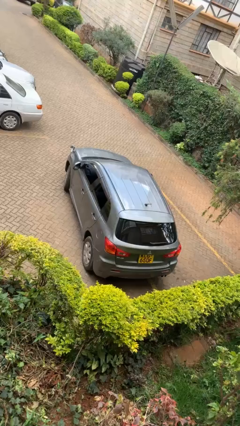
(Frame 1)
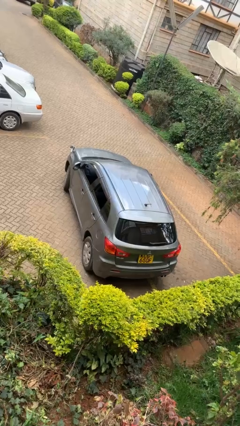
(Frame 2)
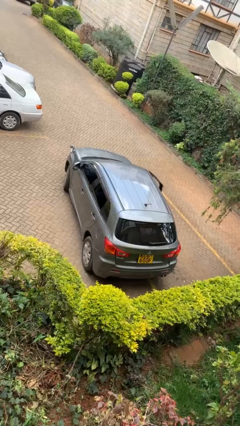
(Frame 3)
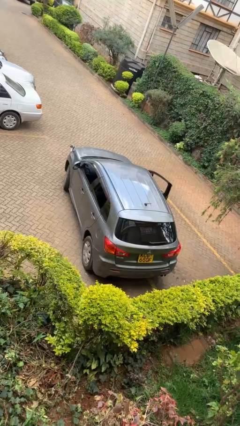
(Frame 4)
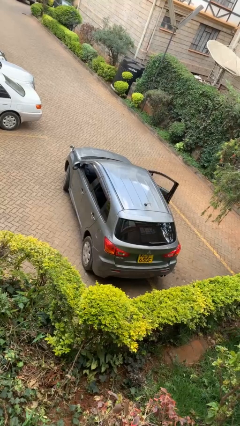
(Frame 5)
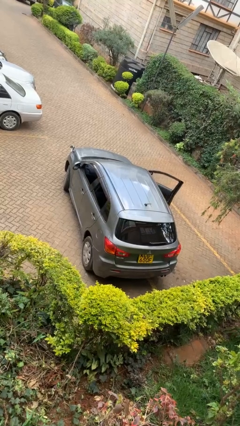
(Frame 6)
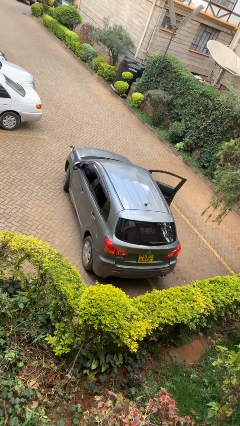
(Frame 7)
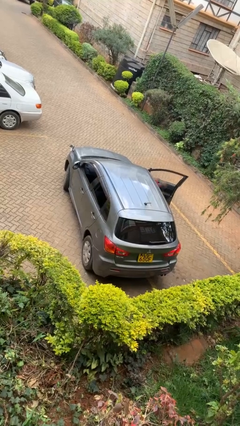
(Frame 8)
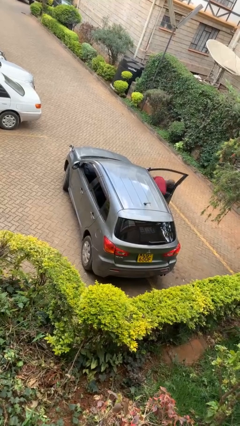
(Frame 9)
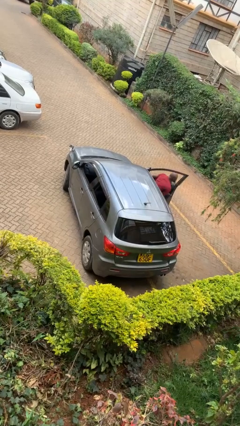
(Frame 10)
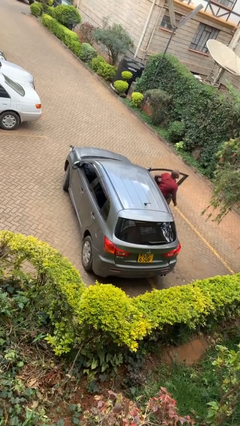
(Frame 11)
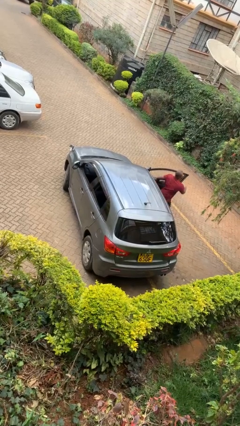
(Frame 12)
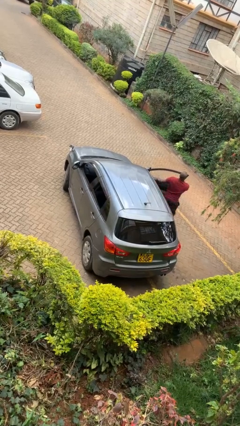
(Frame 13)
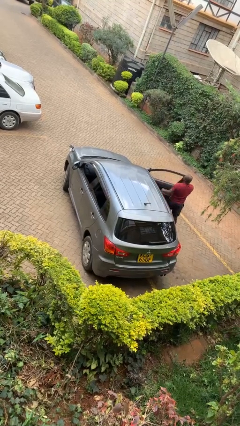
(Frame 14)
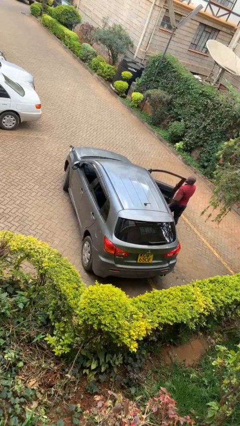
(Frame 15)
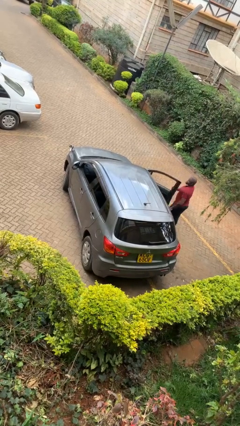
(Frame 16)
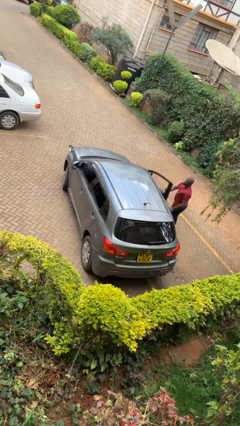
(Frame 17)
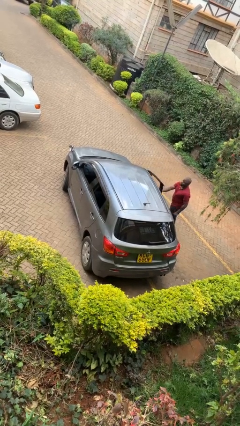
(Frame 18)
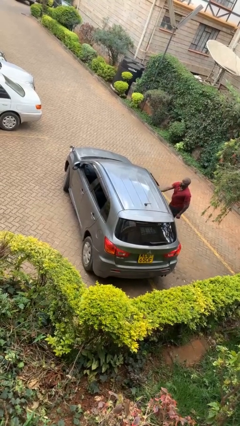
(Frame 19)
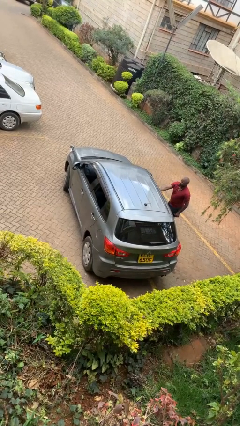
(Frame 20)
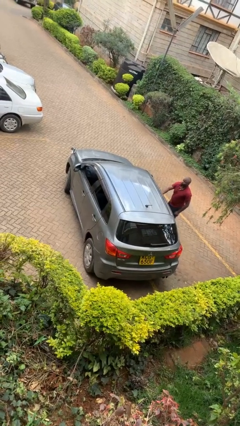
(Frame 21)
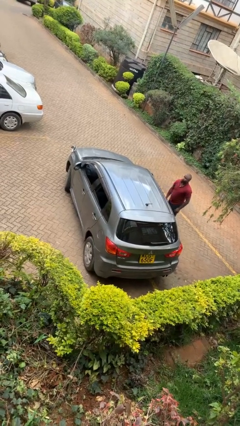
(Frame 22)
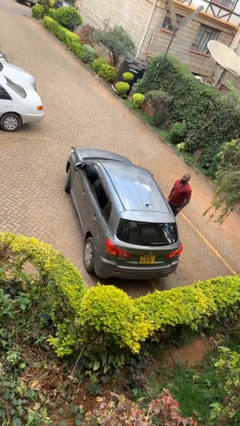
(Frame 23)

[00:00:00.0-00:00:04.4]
car drops off person

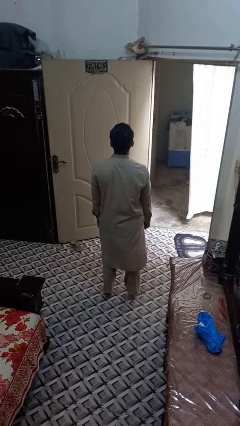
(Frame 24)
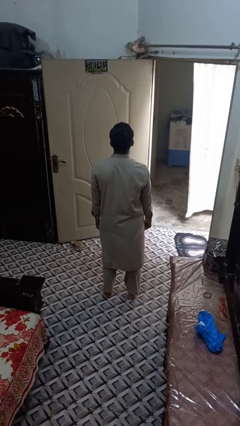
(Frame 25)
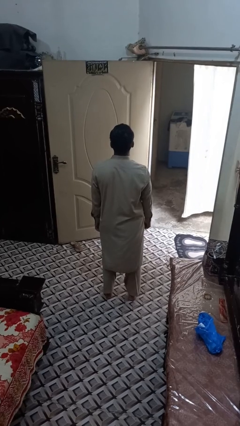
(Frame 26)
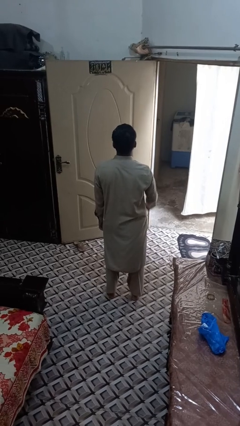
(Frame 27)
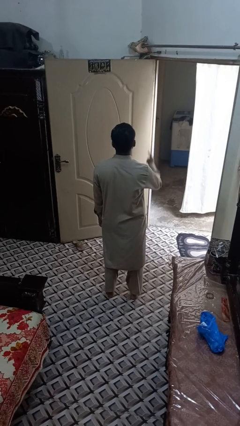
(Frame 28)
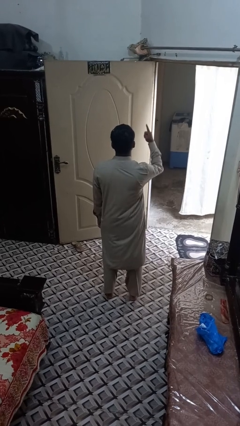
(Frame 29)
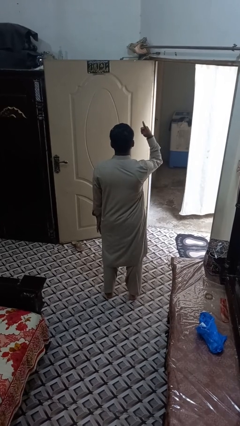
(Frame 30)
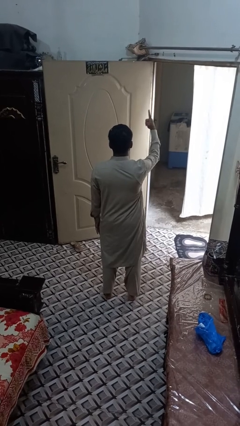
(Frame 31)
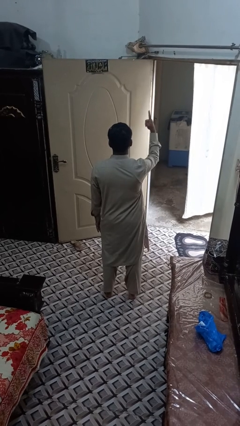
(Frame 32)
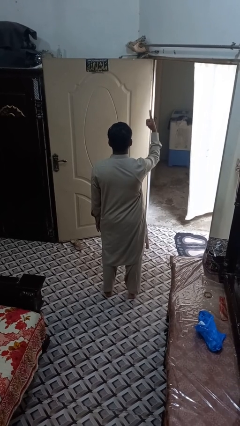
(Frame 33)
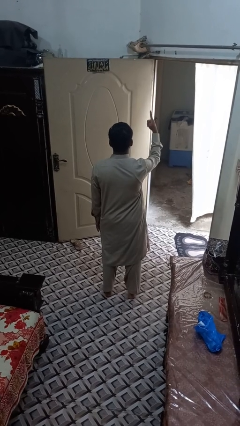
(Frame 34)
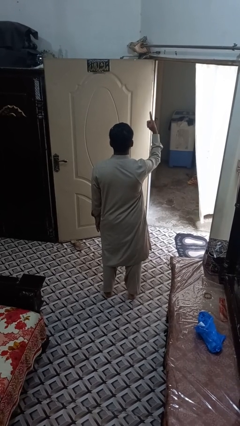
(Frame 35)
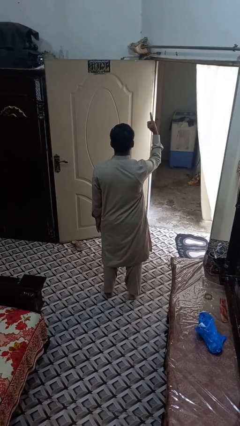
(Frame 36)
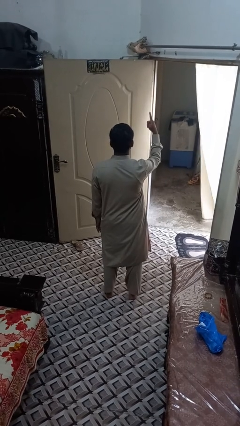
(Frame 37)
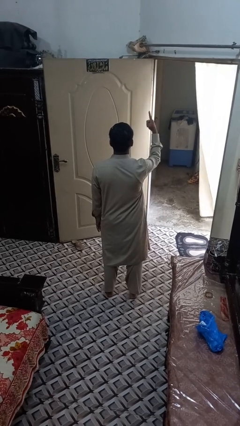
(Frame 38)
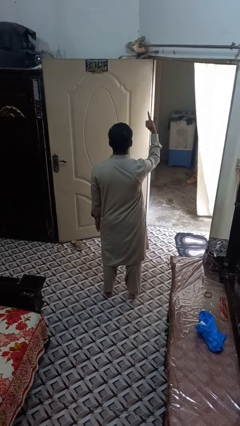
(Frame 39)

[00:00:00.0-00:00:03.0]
person gestures number one

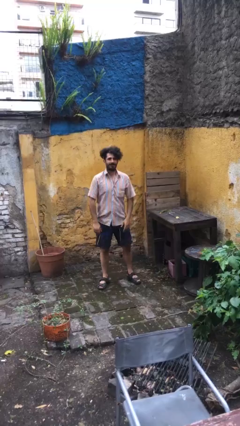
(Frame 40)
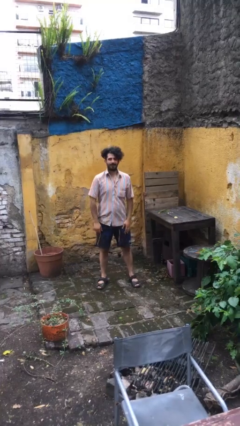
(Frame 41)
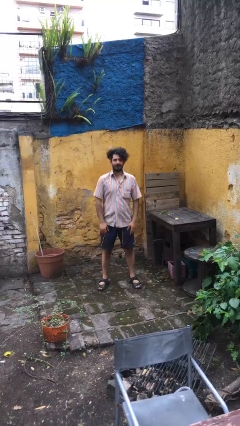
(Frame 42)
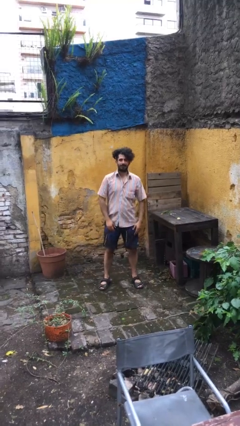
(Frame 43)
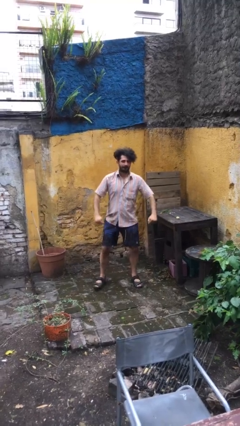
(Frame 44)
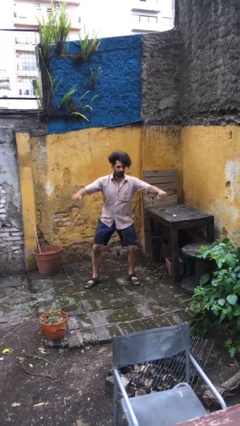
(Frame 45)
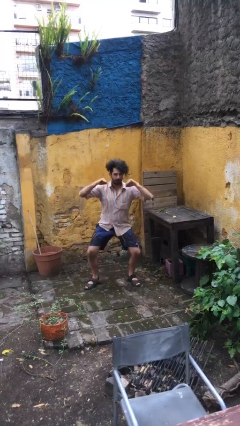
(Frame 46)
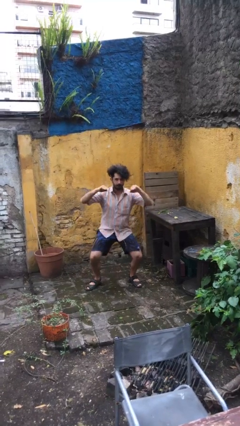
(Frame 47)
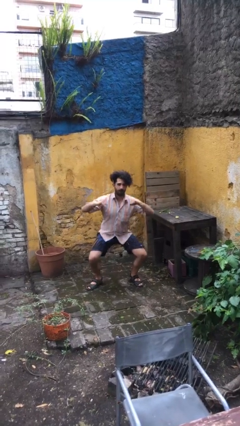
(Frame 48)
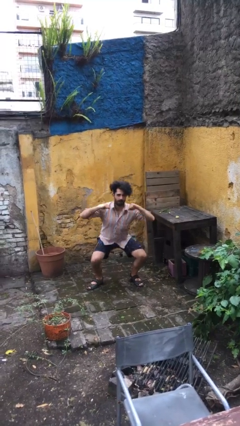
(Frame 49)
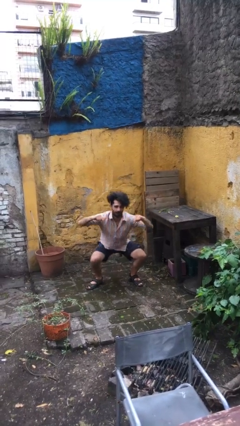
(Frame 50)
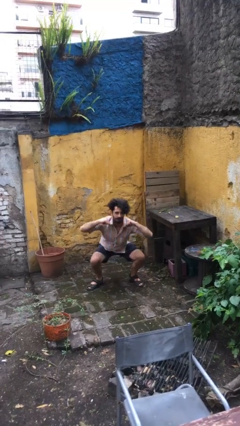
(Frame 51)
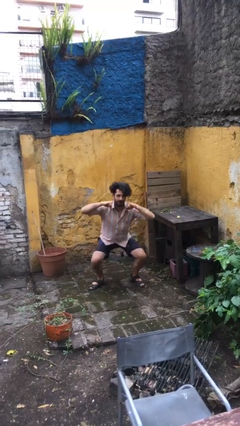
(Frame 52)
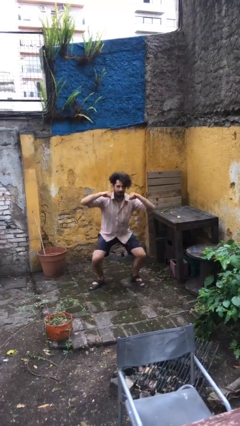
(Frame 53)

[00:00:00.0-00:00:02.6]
person dances in place

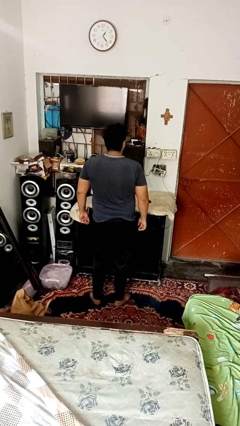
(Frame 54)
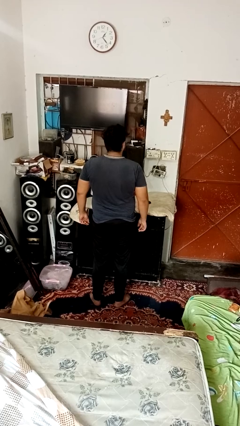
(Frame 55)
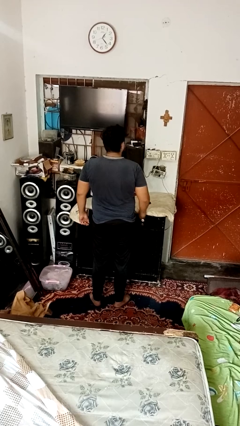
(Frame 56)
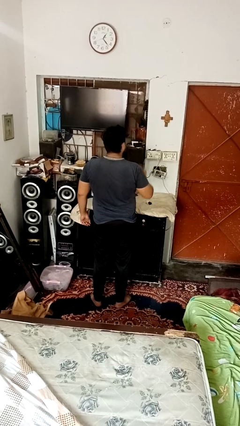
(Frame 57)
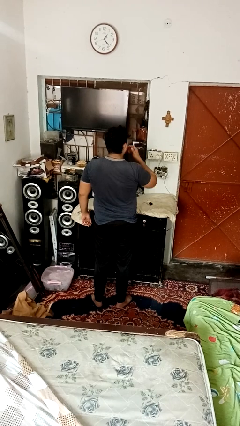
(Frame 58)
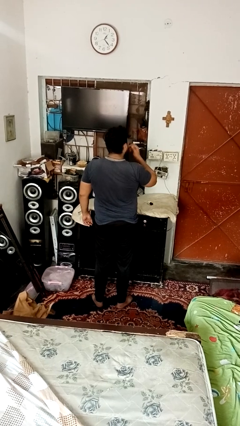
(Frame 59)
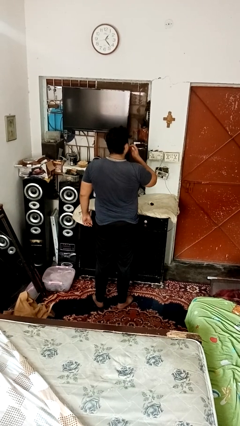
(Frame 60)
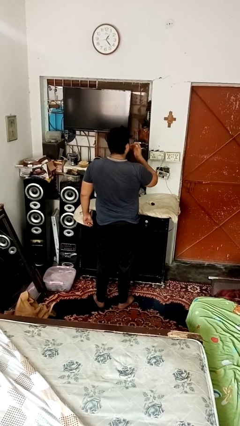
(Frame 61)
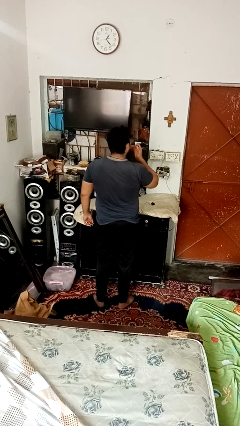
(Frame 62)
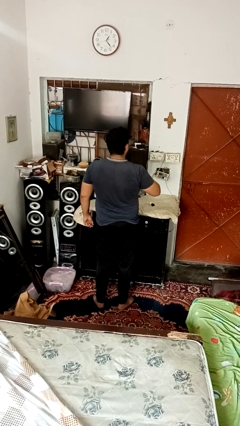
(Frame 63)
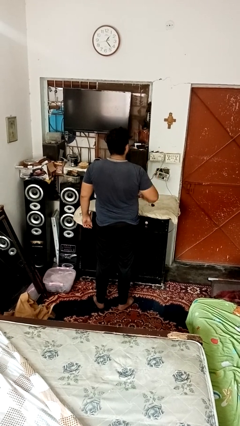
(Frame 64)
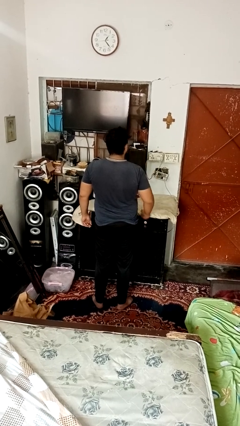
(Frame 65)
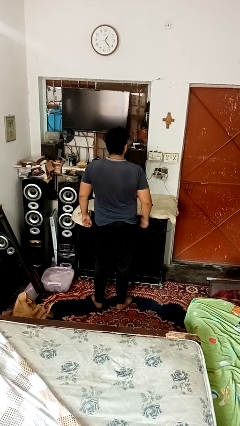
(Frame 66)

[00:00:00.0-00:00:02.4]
person licks fingers

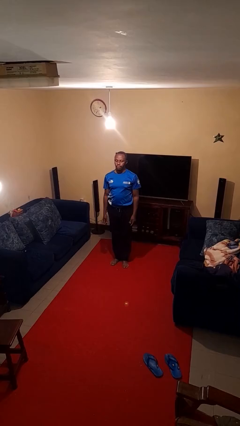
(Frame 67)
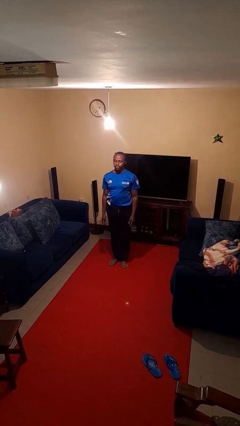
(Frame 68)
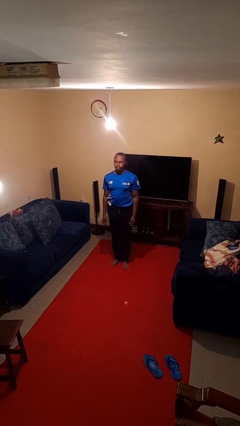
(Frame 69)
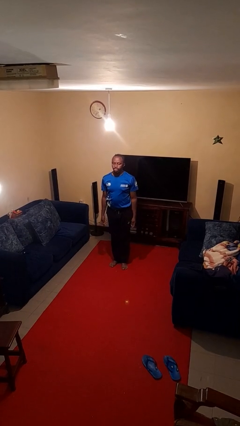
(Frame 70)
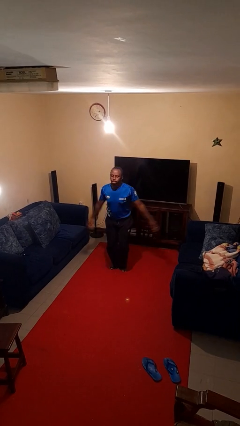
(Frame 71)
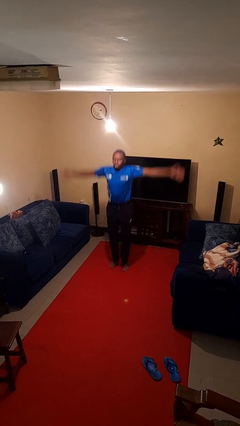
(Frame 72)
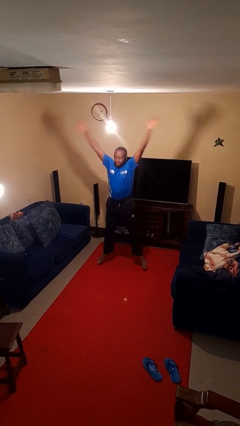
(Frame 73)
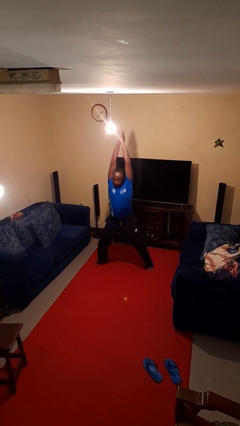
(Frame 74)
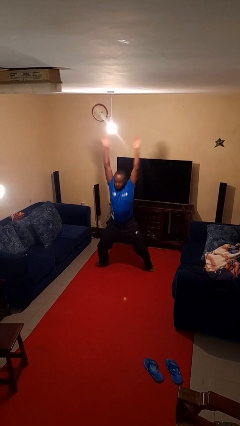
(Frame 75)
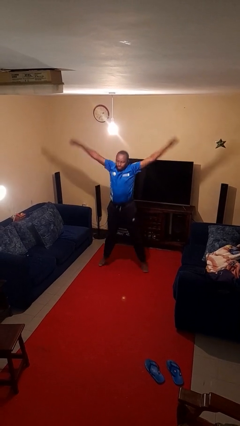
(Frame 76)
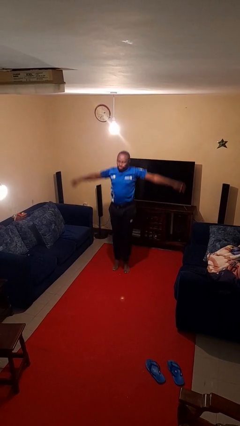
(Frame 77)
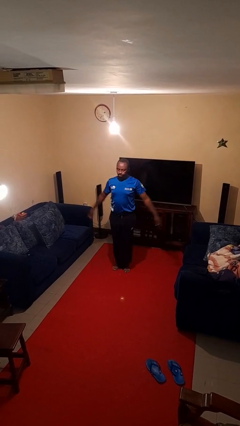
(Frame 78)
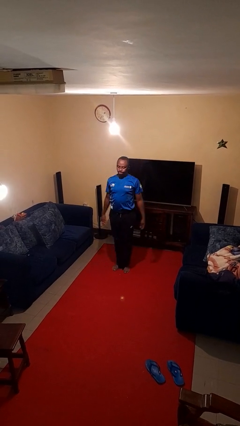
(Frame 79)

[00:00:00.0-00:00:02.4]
person exercises with jumping jacks

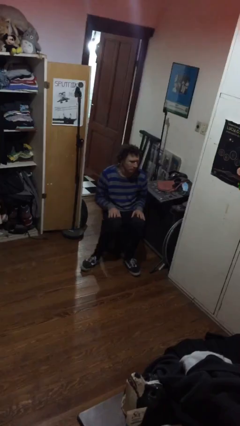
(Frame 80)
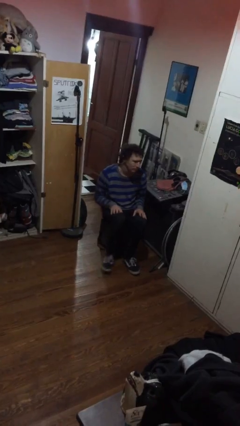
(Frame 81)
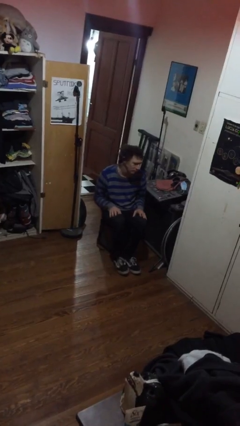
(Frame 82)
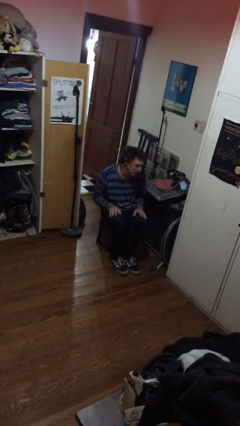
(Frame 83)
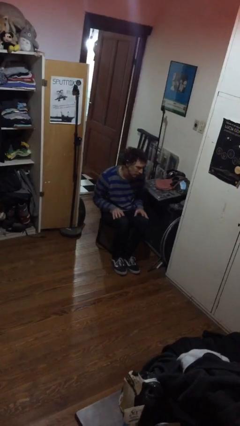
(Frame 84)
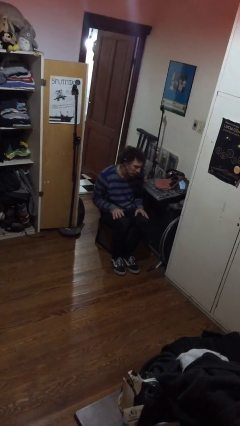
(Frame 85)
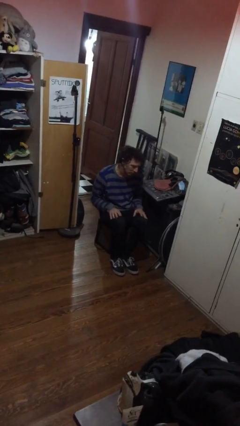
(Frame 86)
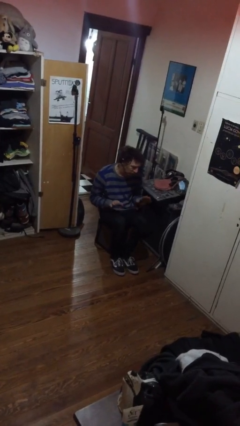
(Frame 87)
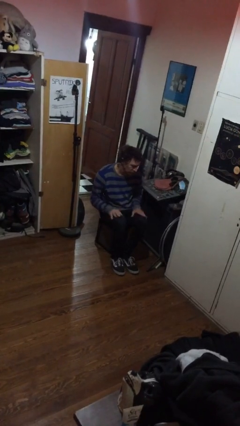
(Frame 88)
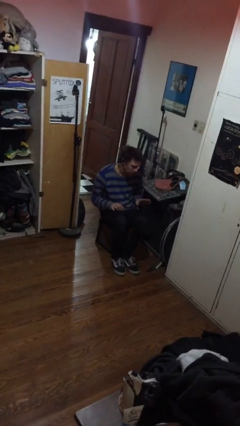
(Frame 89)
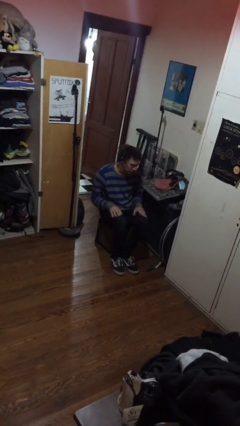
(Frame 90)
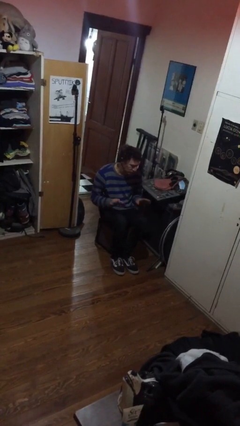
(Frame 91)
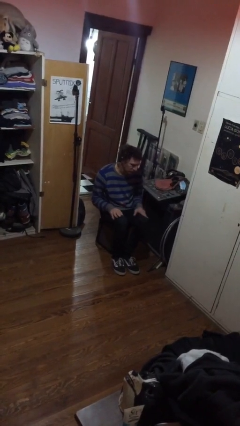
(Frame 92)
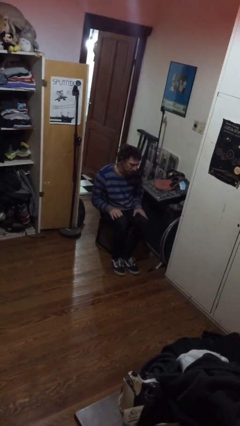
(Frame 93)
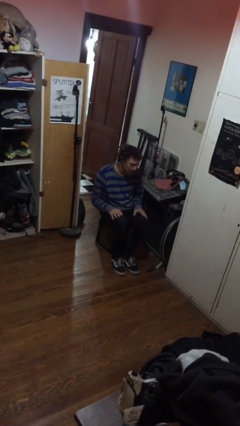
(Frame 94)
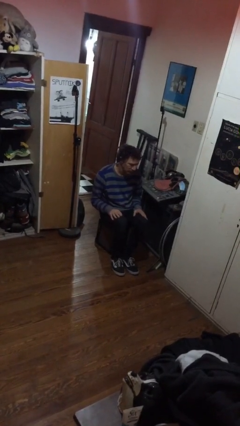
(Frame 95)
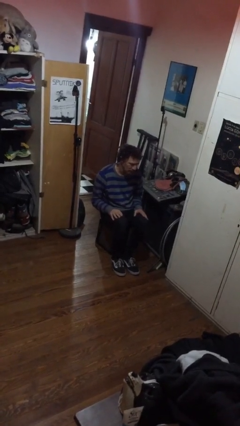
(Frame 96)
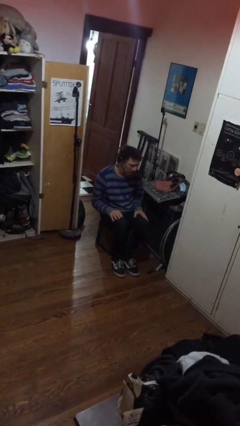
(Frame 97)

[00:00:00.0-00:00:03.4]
person slaps hands on thighs
